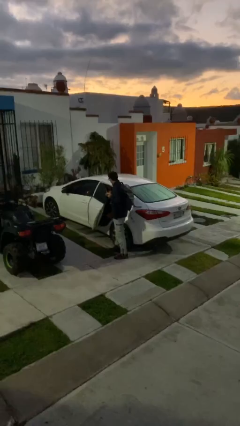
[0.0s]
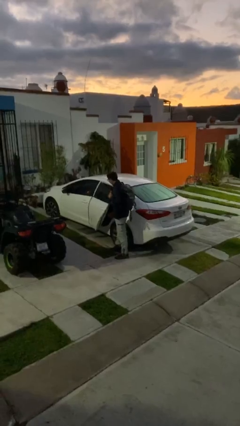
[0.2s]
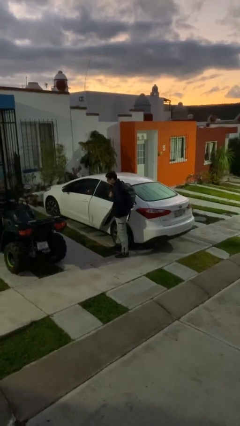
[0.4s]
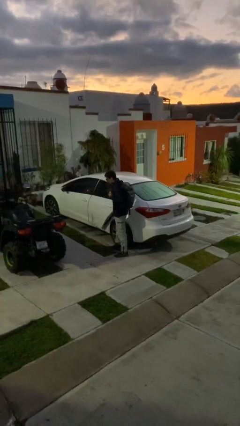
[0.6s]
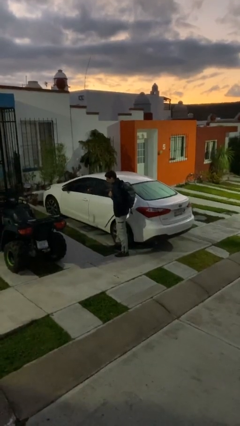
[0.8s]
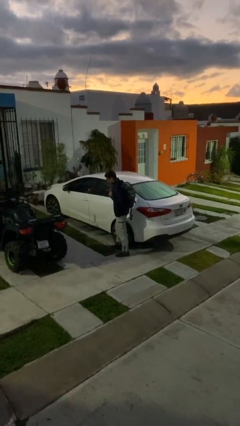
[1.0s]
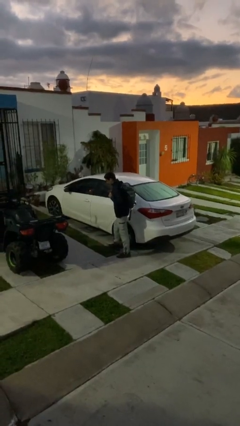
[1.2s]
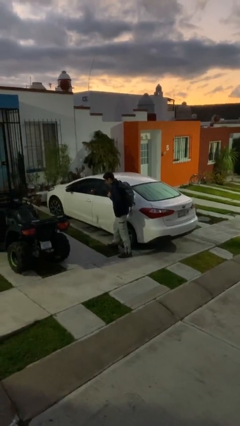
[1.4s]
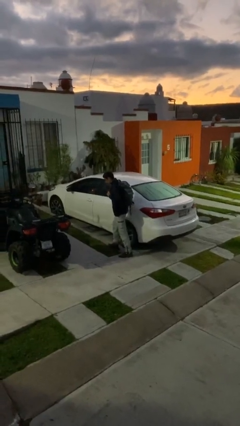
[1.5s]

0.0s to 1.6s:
person closes car door

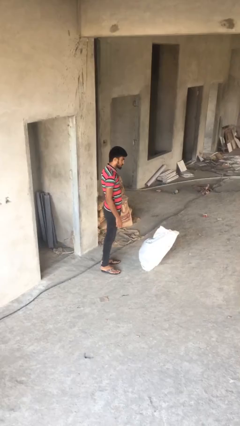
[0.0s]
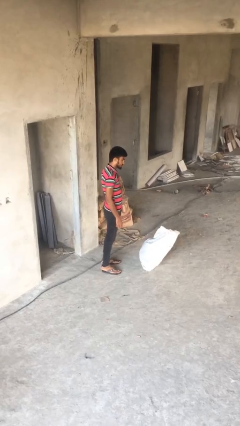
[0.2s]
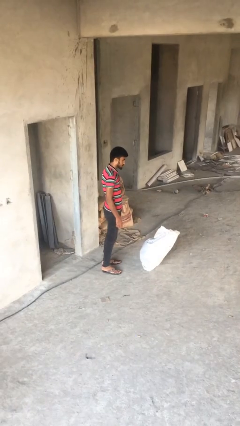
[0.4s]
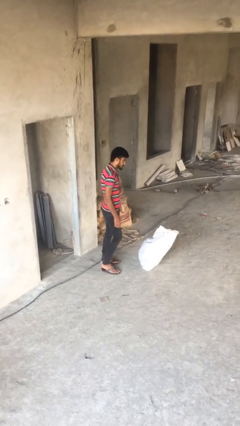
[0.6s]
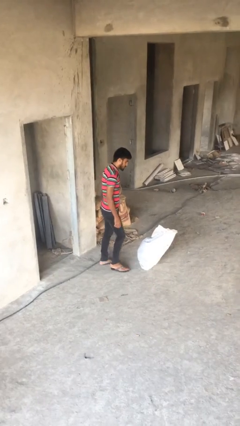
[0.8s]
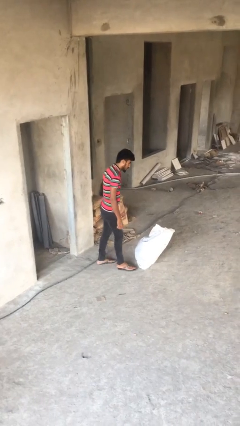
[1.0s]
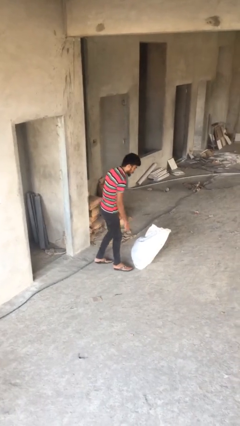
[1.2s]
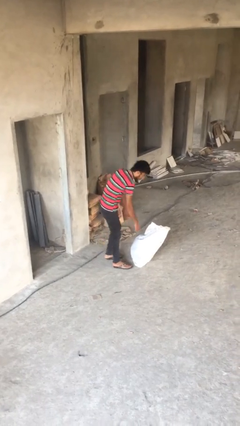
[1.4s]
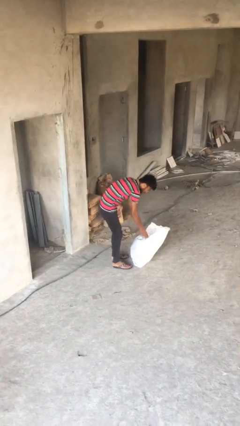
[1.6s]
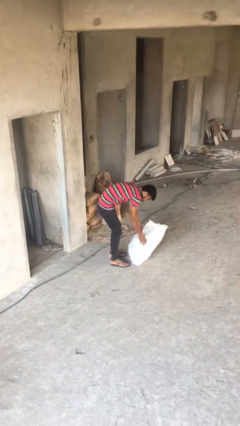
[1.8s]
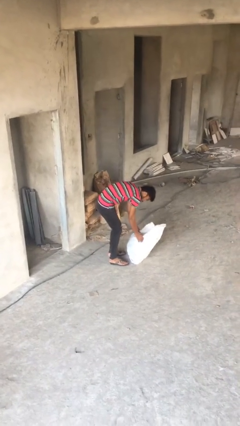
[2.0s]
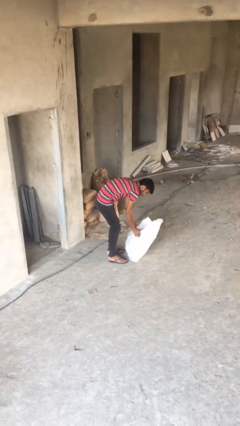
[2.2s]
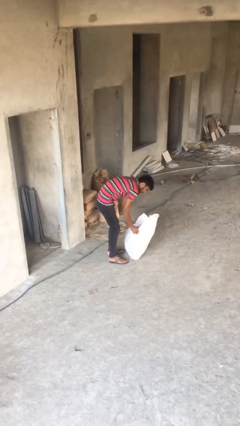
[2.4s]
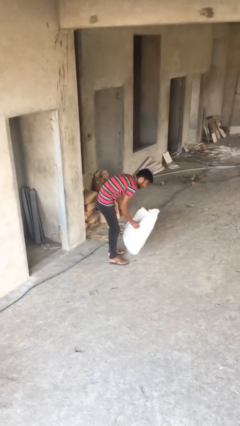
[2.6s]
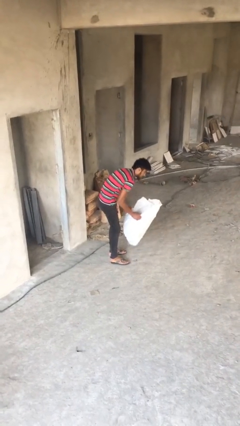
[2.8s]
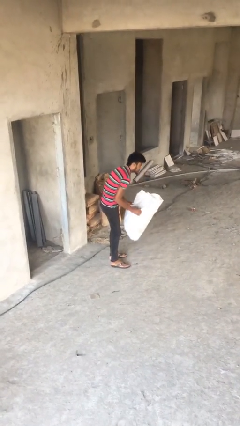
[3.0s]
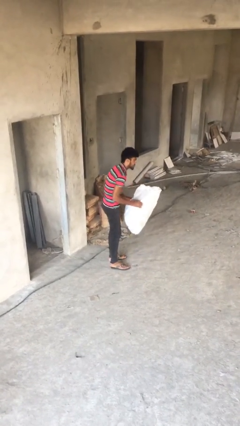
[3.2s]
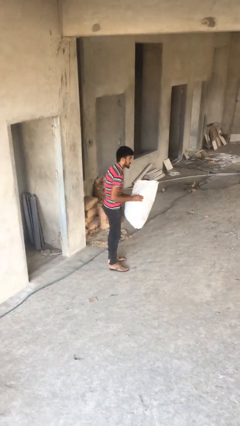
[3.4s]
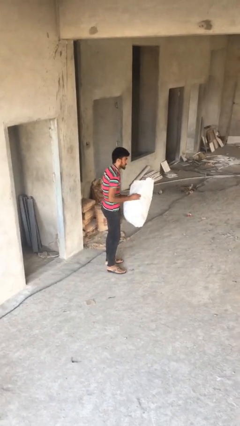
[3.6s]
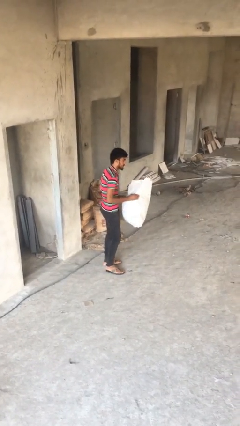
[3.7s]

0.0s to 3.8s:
person picks up object from floor

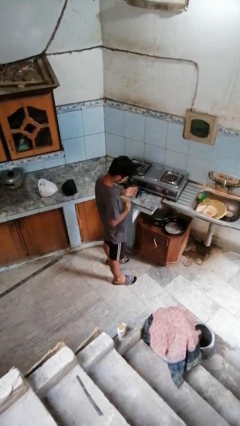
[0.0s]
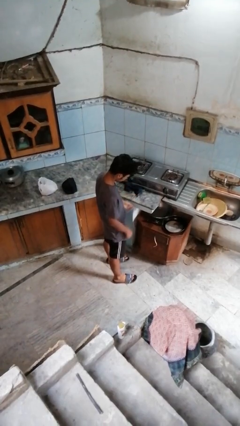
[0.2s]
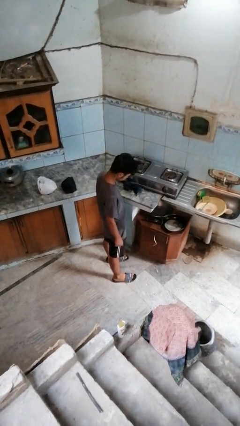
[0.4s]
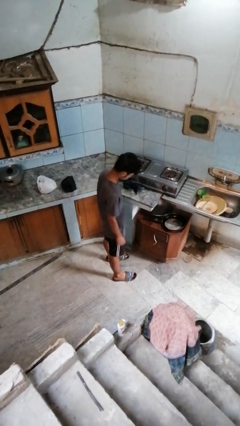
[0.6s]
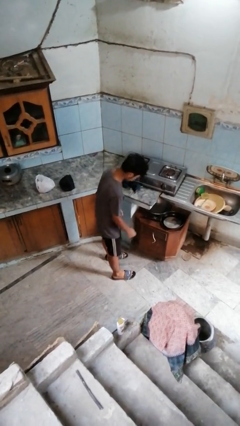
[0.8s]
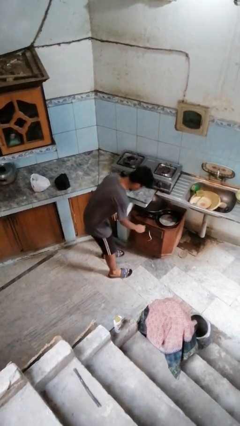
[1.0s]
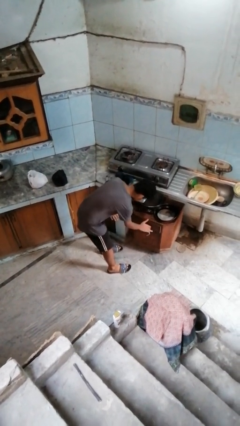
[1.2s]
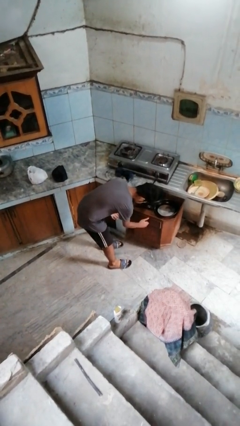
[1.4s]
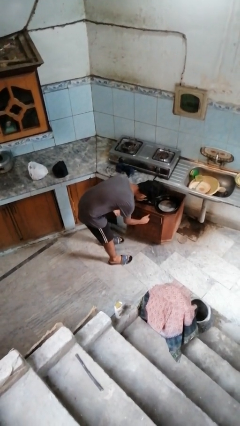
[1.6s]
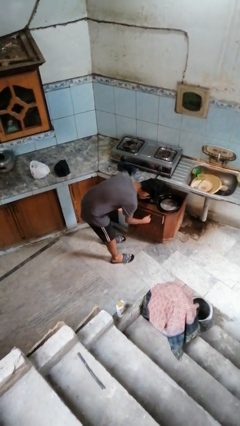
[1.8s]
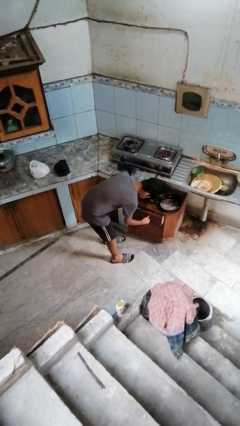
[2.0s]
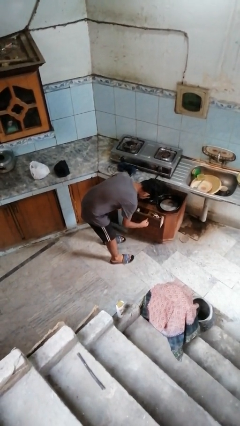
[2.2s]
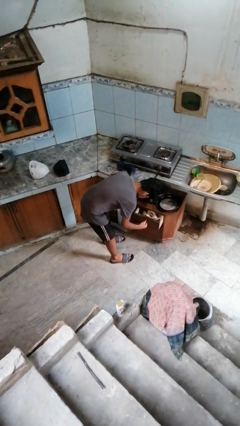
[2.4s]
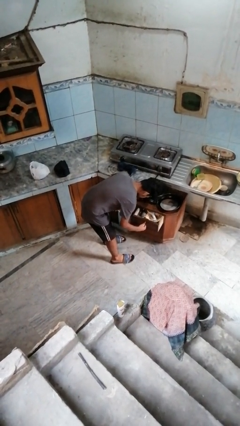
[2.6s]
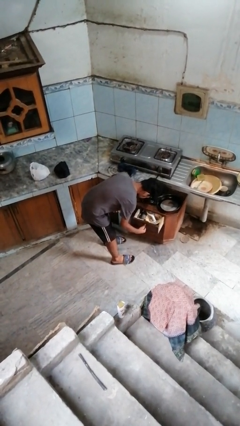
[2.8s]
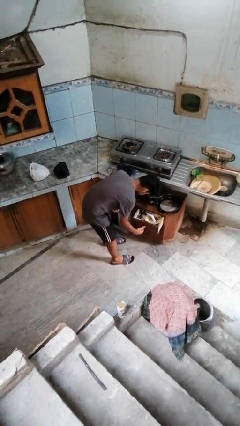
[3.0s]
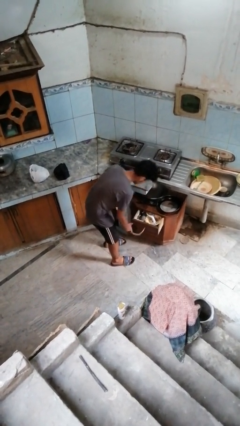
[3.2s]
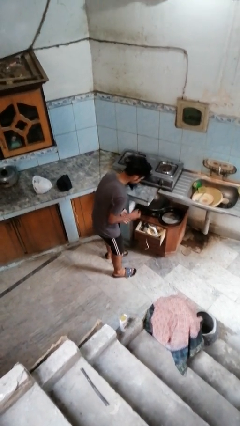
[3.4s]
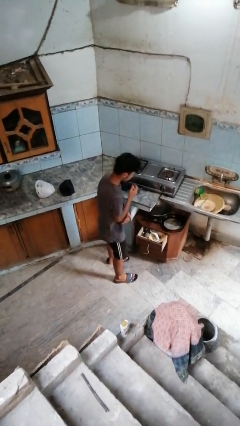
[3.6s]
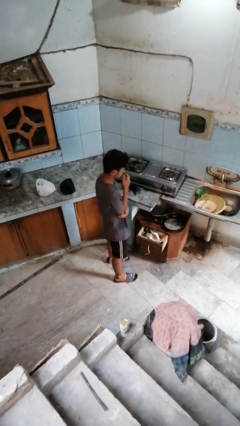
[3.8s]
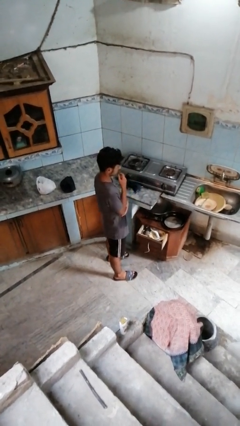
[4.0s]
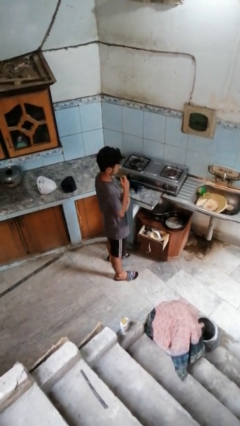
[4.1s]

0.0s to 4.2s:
person opens kitchen drawer

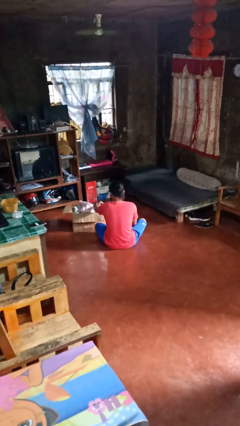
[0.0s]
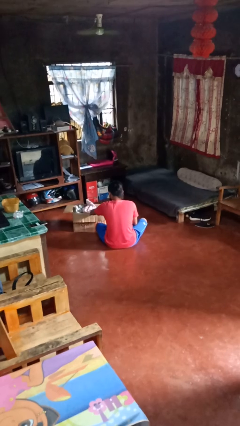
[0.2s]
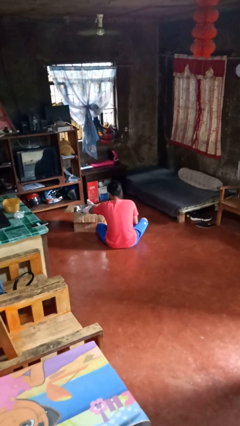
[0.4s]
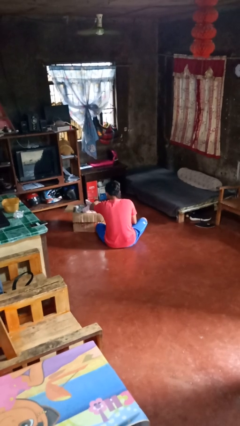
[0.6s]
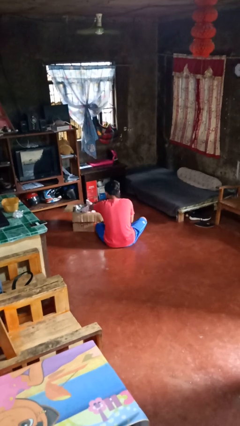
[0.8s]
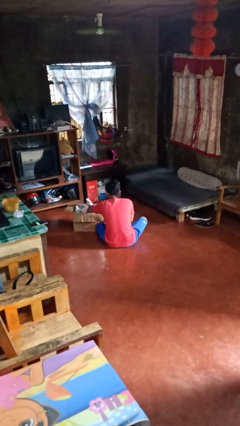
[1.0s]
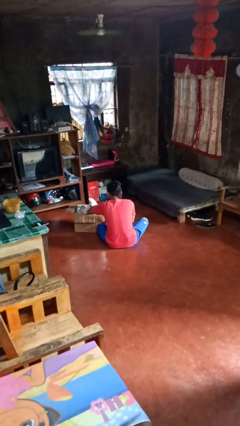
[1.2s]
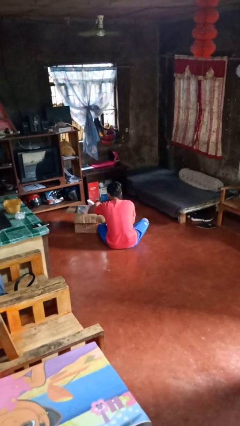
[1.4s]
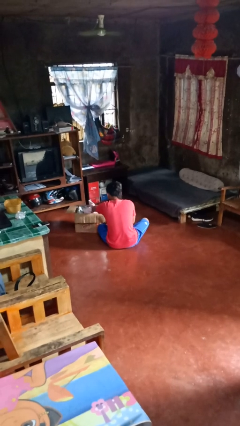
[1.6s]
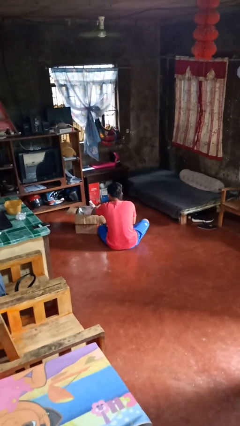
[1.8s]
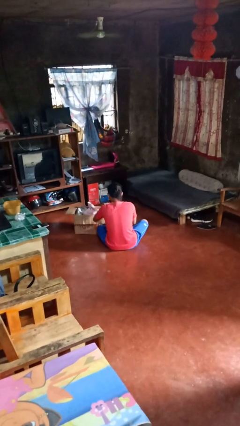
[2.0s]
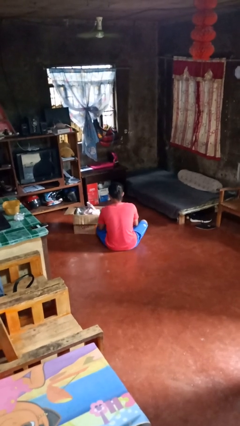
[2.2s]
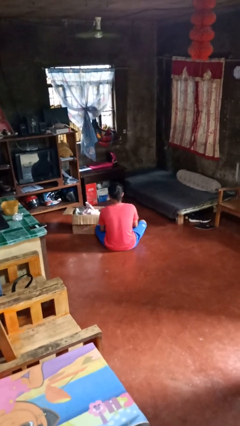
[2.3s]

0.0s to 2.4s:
person searches in box

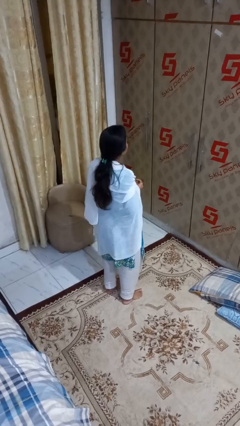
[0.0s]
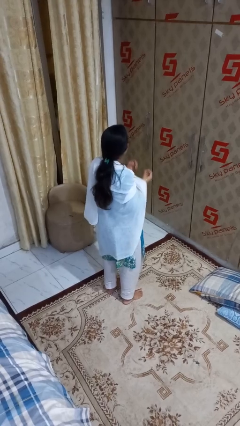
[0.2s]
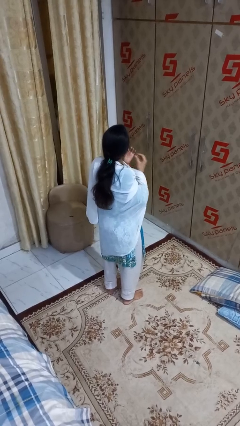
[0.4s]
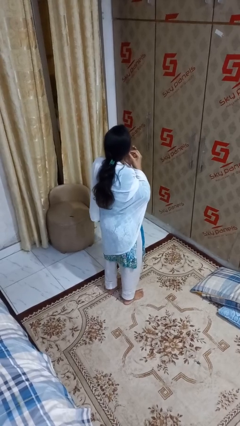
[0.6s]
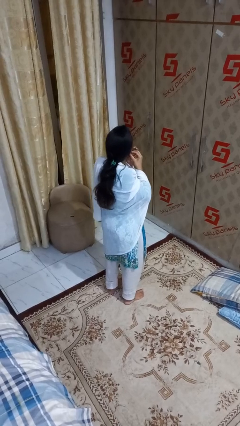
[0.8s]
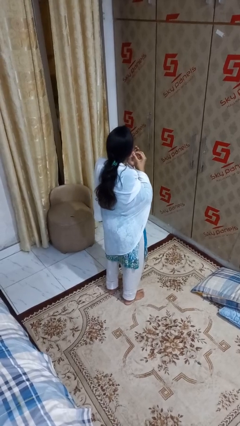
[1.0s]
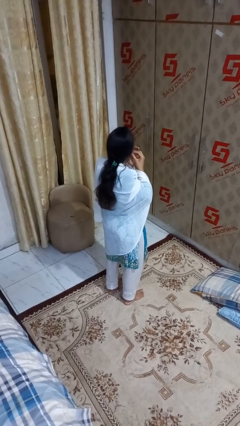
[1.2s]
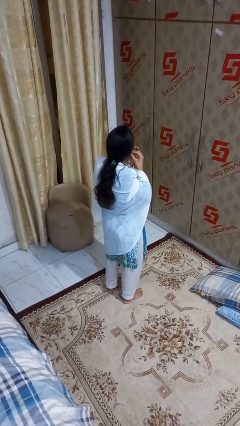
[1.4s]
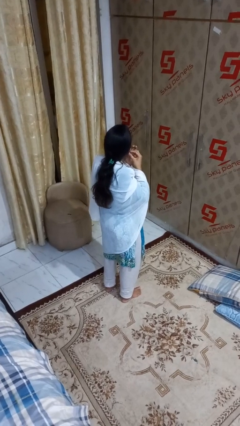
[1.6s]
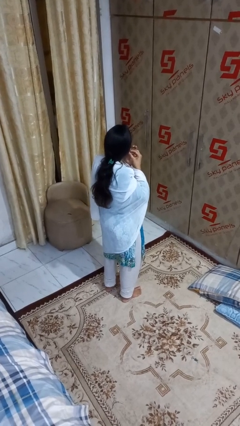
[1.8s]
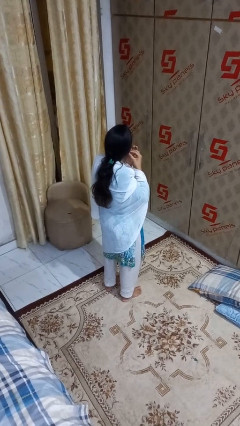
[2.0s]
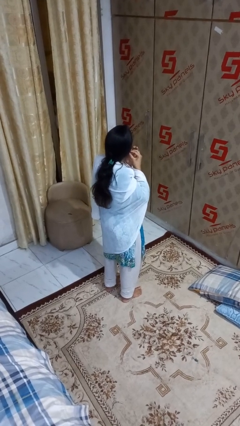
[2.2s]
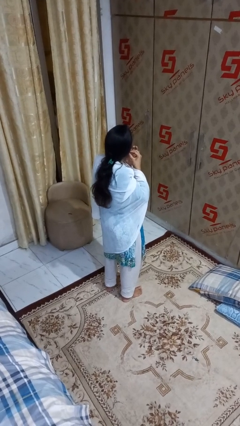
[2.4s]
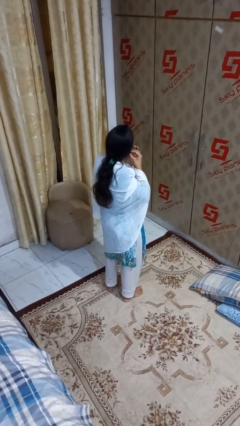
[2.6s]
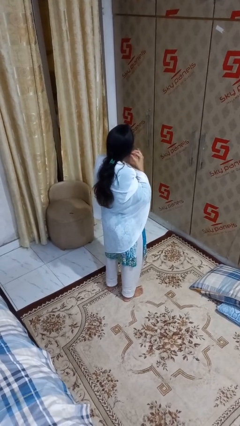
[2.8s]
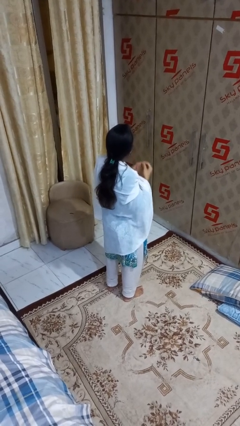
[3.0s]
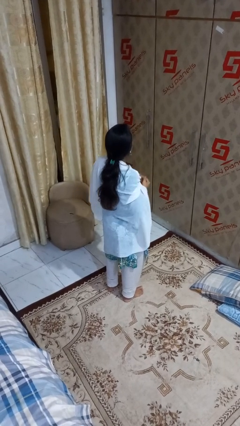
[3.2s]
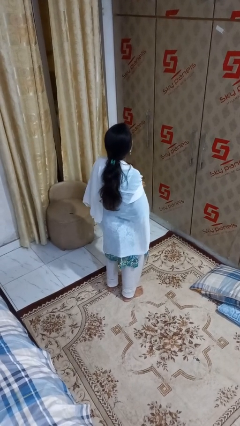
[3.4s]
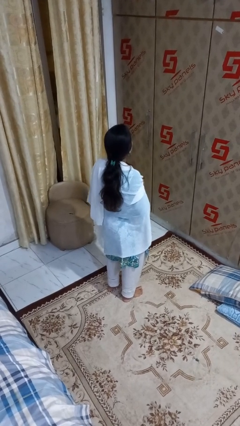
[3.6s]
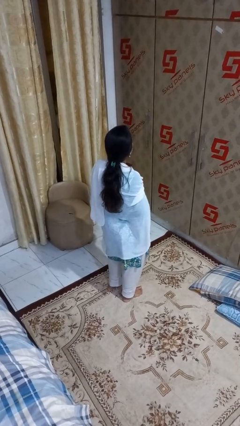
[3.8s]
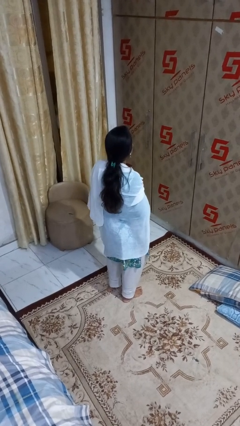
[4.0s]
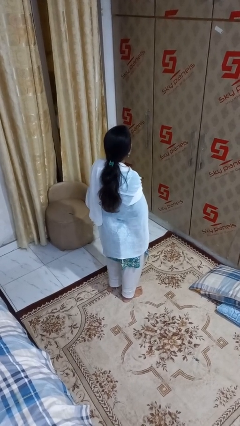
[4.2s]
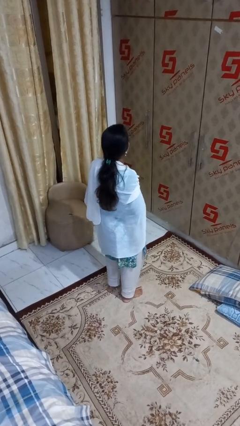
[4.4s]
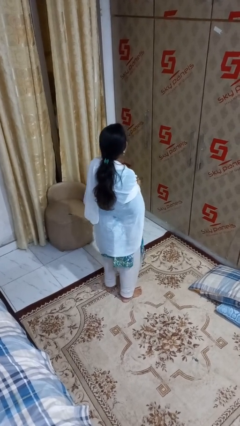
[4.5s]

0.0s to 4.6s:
person puts on earrings

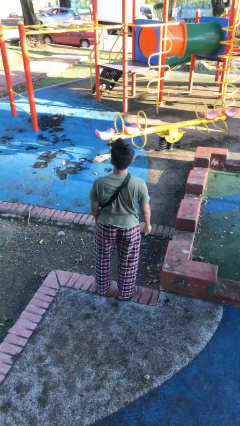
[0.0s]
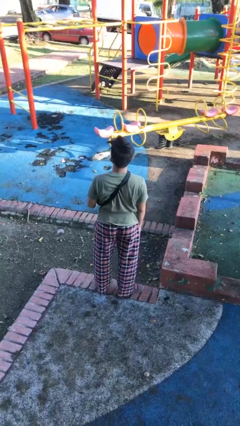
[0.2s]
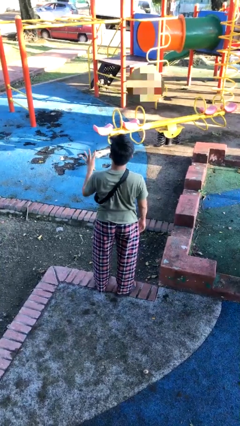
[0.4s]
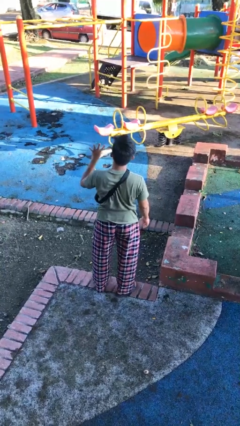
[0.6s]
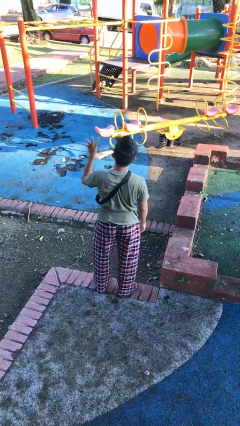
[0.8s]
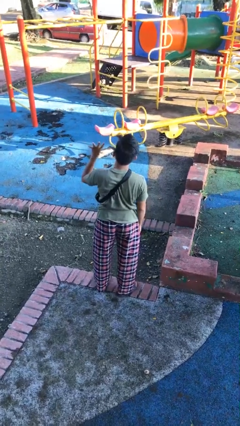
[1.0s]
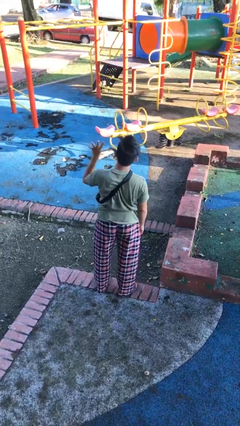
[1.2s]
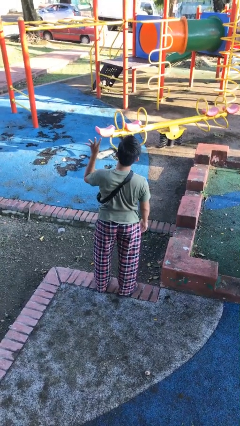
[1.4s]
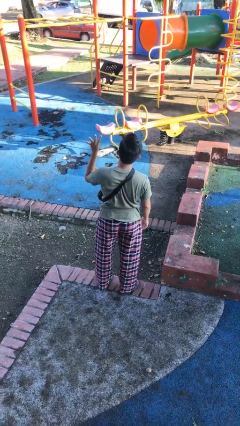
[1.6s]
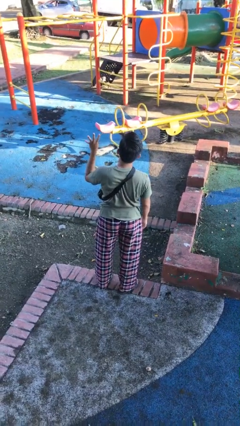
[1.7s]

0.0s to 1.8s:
person gestures number four
